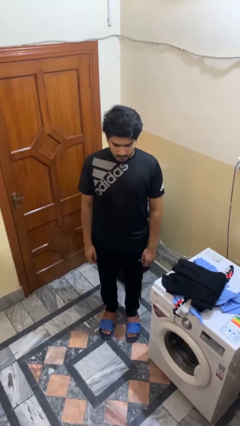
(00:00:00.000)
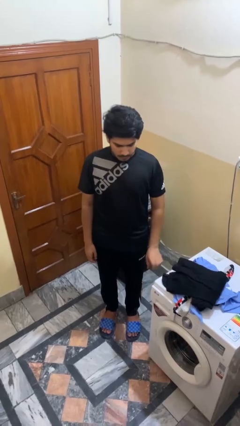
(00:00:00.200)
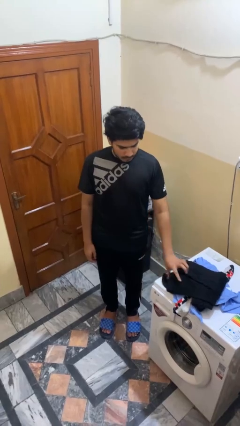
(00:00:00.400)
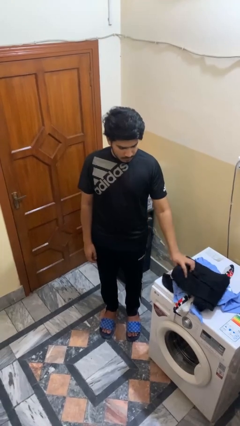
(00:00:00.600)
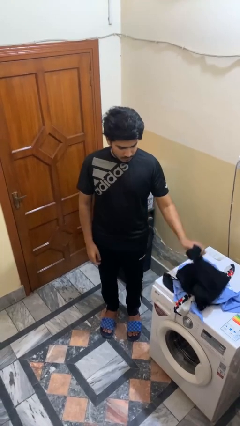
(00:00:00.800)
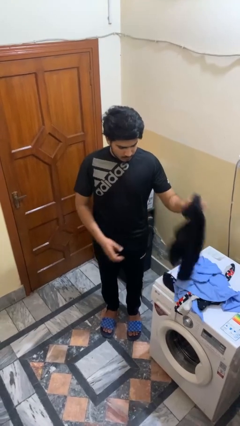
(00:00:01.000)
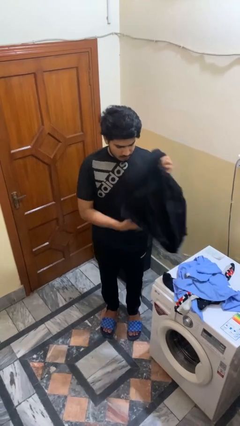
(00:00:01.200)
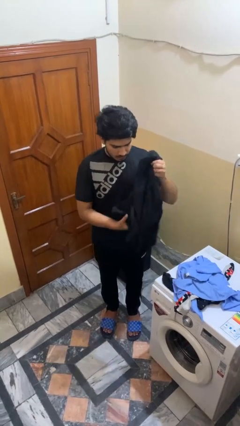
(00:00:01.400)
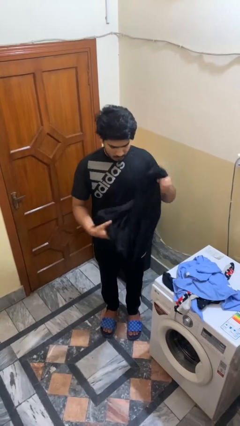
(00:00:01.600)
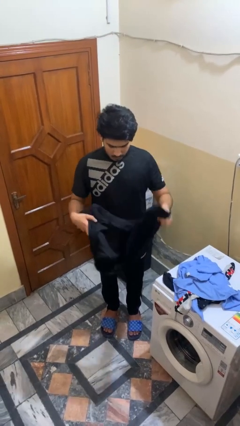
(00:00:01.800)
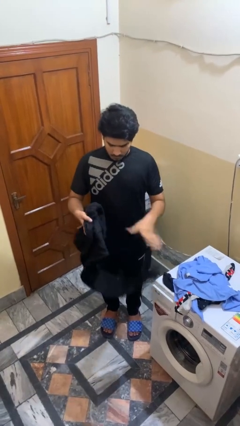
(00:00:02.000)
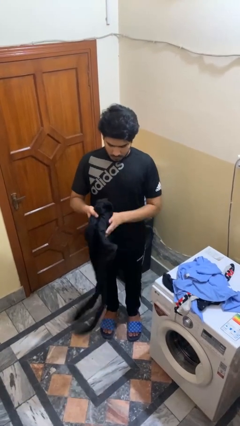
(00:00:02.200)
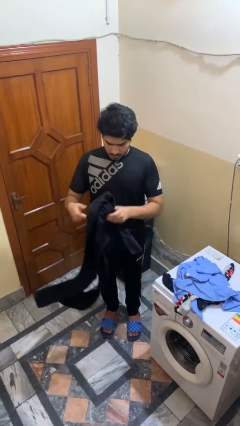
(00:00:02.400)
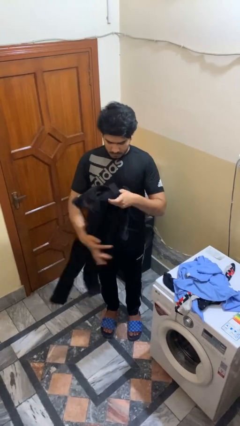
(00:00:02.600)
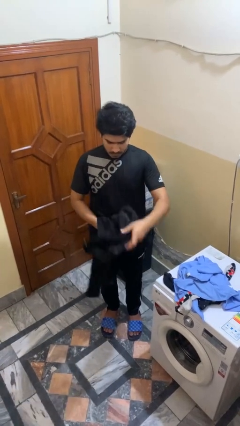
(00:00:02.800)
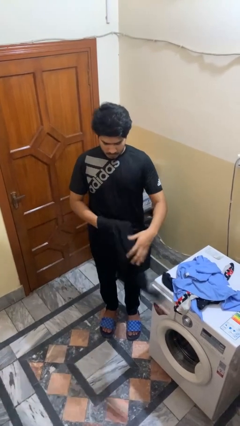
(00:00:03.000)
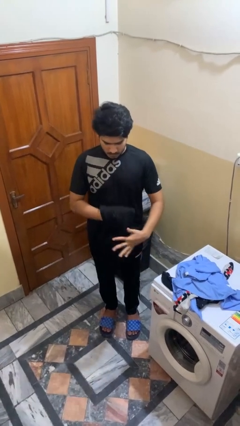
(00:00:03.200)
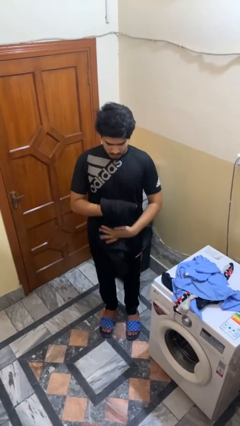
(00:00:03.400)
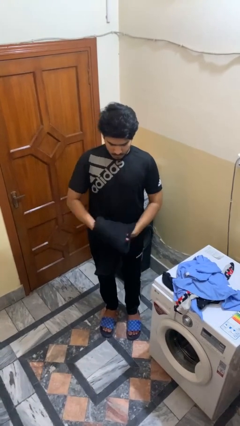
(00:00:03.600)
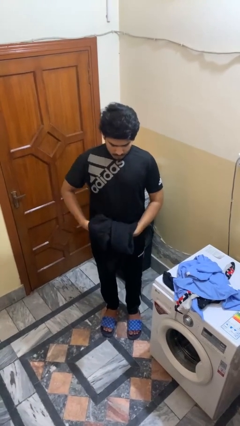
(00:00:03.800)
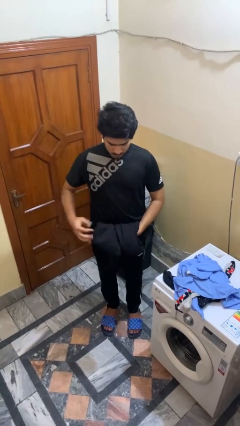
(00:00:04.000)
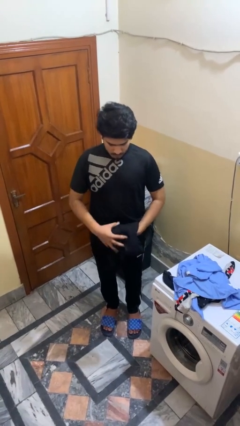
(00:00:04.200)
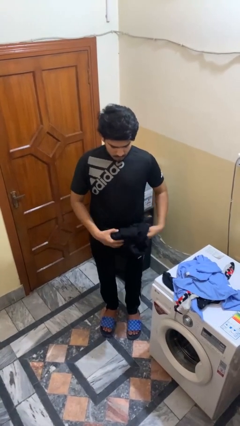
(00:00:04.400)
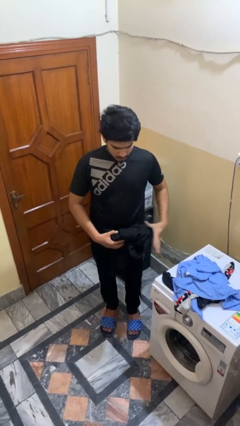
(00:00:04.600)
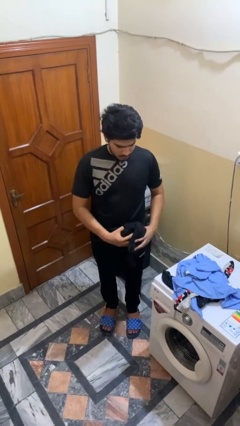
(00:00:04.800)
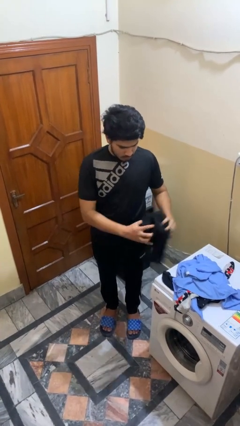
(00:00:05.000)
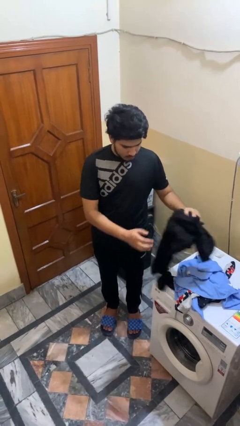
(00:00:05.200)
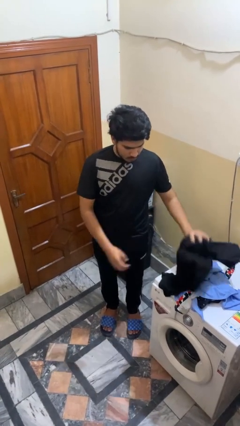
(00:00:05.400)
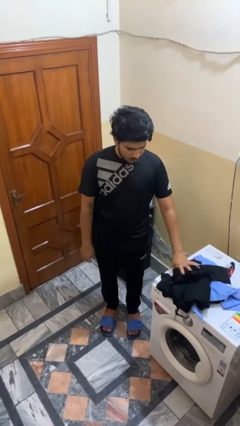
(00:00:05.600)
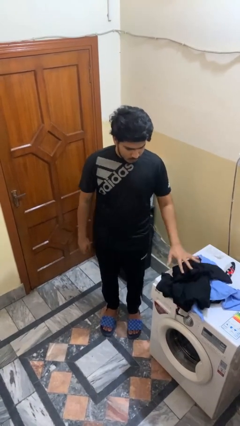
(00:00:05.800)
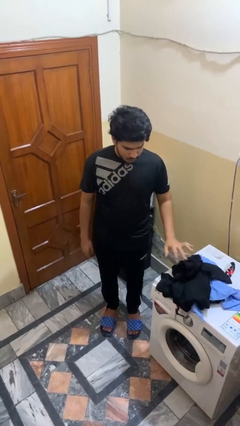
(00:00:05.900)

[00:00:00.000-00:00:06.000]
person folds pants

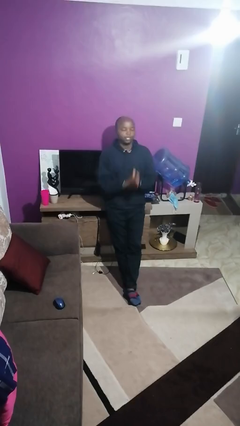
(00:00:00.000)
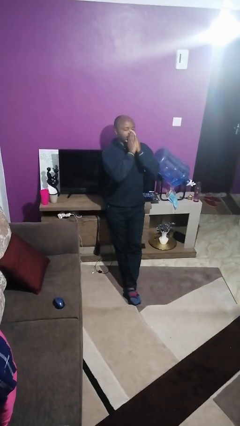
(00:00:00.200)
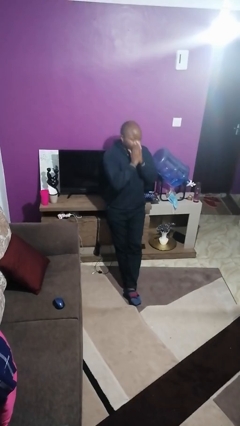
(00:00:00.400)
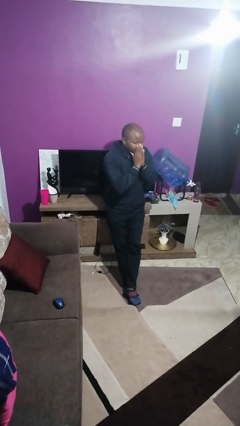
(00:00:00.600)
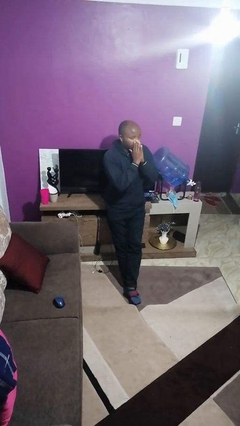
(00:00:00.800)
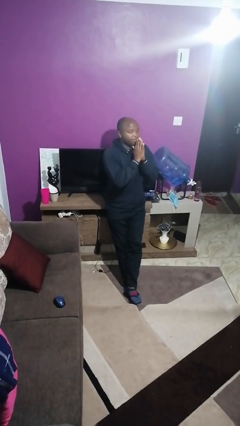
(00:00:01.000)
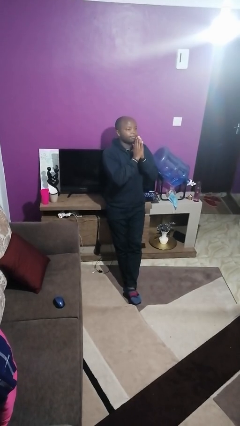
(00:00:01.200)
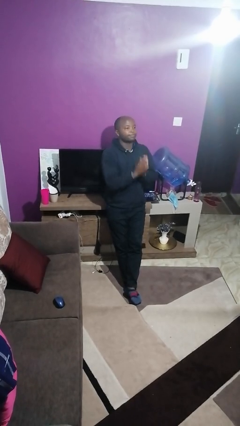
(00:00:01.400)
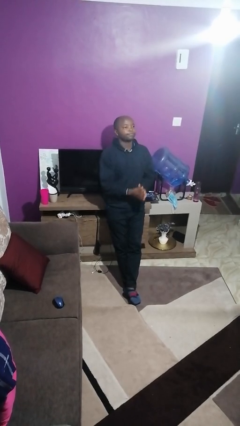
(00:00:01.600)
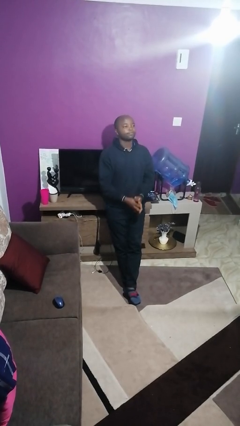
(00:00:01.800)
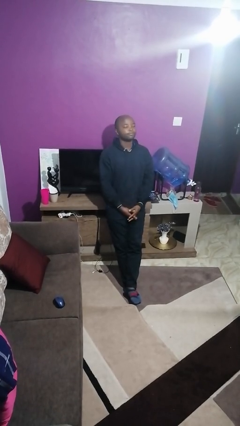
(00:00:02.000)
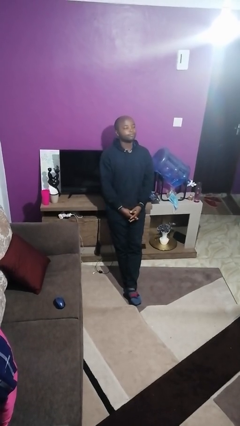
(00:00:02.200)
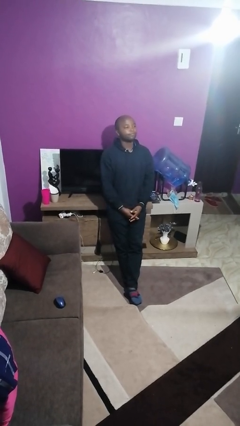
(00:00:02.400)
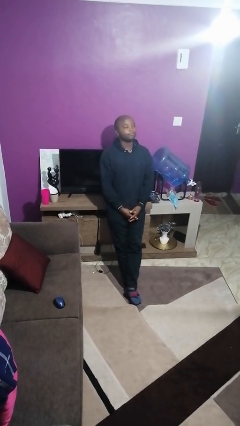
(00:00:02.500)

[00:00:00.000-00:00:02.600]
person sneezes into hand

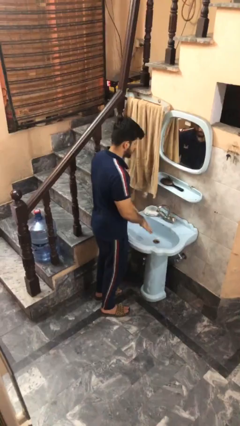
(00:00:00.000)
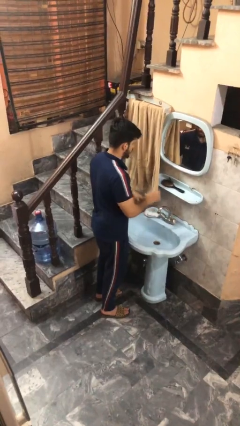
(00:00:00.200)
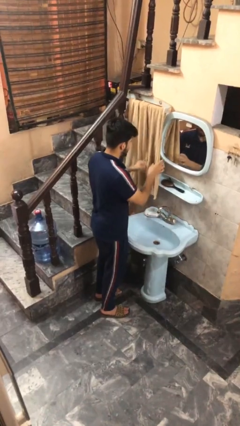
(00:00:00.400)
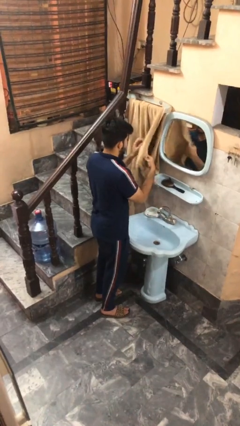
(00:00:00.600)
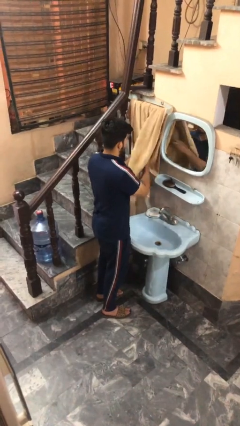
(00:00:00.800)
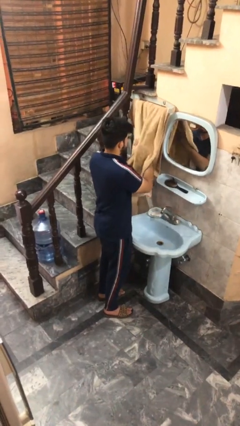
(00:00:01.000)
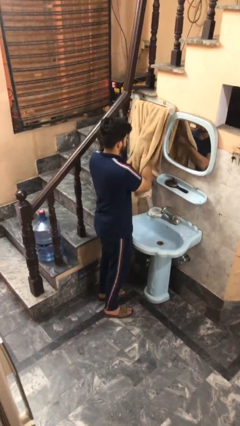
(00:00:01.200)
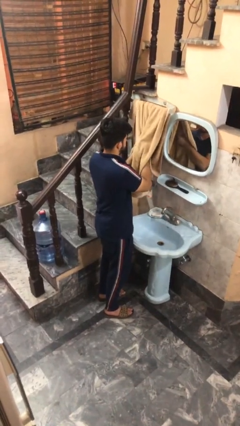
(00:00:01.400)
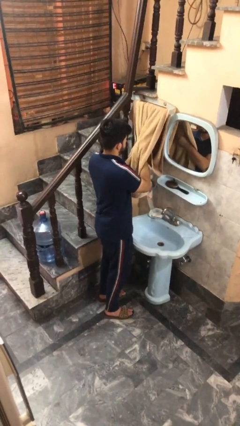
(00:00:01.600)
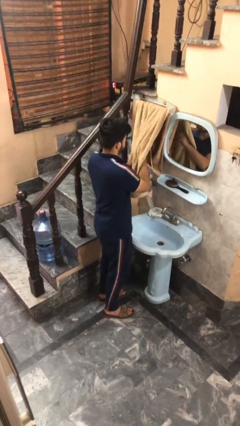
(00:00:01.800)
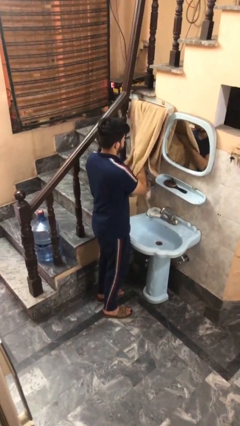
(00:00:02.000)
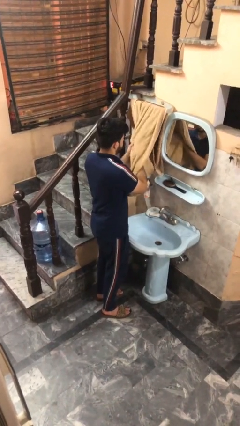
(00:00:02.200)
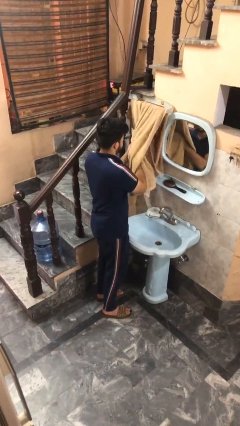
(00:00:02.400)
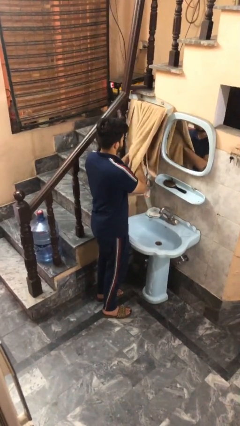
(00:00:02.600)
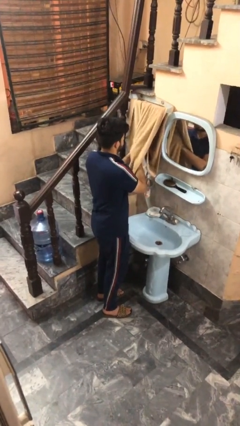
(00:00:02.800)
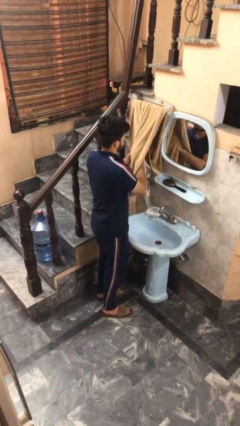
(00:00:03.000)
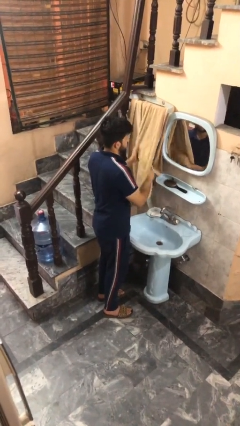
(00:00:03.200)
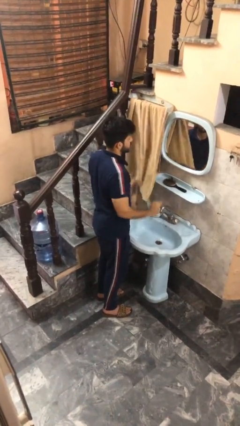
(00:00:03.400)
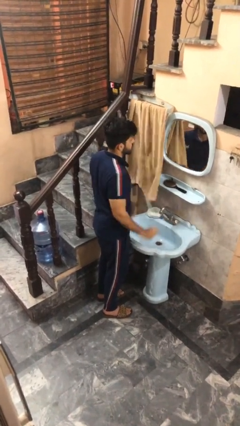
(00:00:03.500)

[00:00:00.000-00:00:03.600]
person dries hands with towel

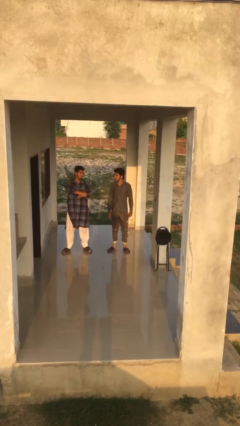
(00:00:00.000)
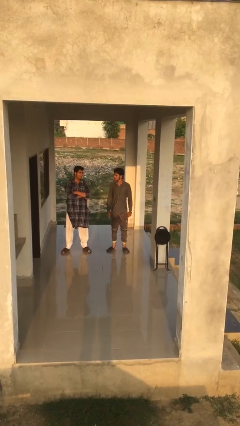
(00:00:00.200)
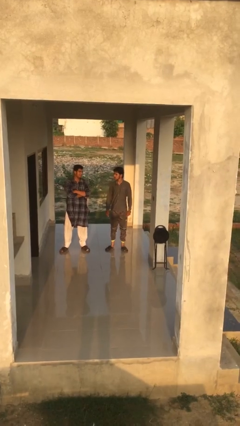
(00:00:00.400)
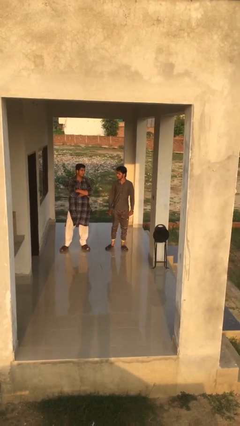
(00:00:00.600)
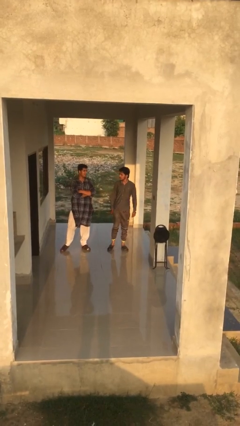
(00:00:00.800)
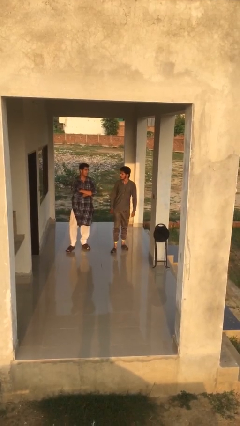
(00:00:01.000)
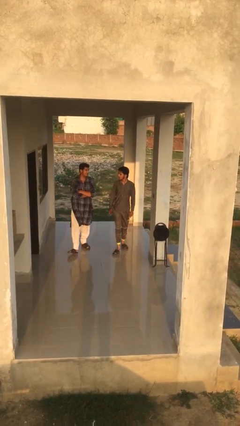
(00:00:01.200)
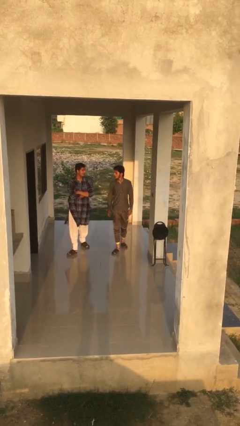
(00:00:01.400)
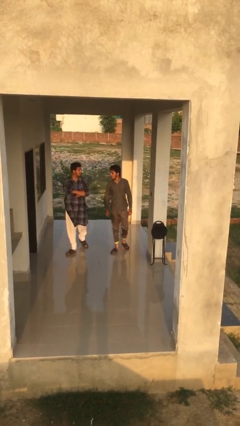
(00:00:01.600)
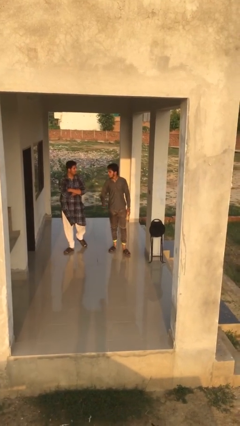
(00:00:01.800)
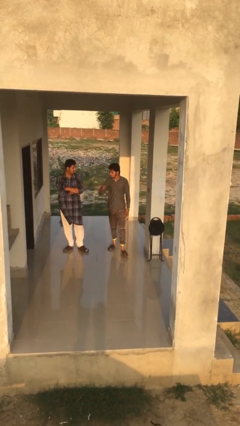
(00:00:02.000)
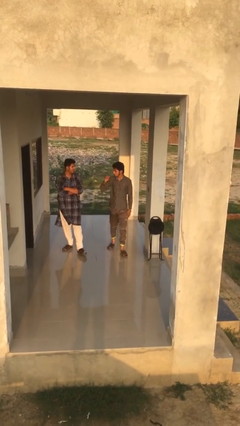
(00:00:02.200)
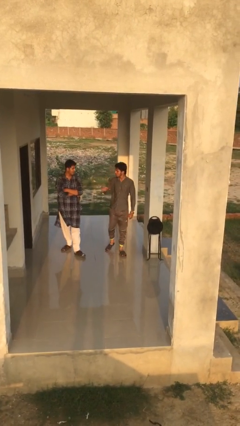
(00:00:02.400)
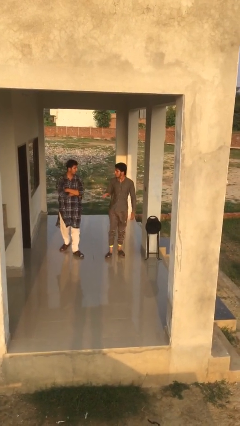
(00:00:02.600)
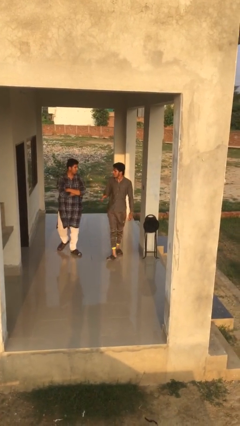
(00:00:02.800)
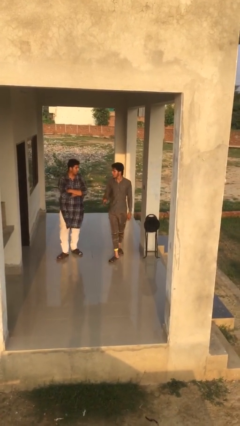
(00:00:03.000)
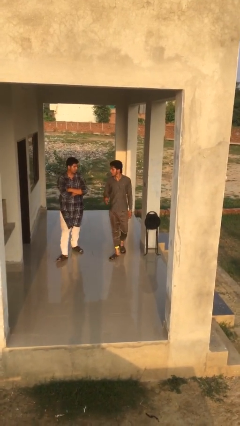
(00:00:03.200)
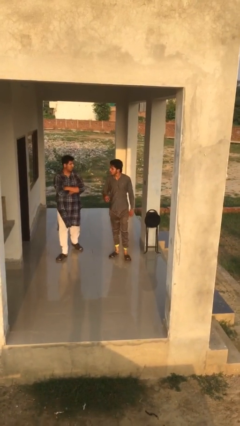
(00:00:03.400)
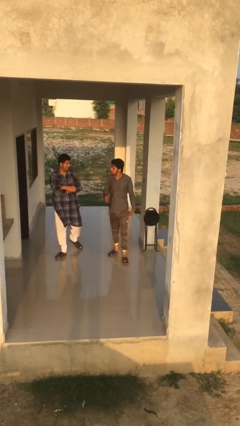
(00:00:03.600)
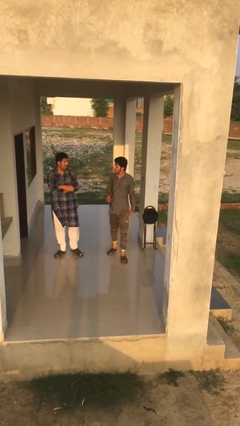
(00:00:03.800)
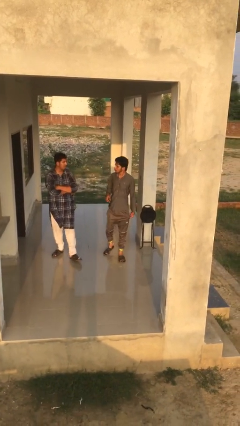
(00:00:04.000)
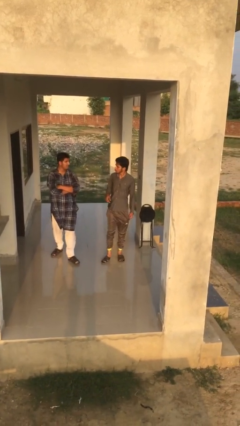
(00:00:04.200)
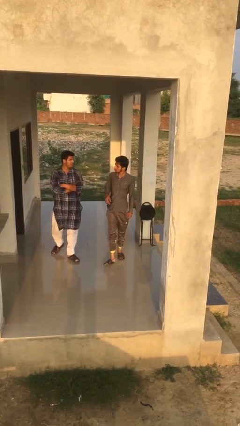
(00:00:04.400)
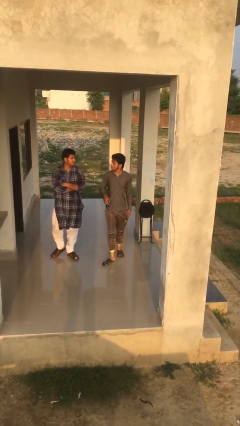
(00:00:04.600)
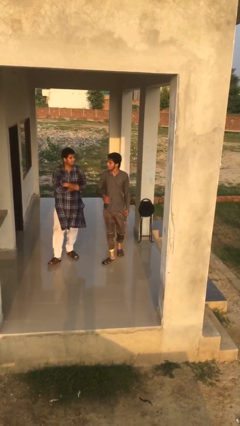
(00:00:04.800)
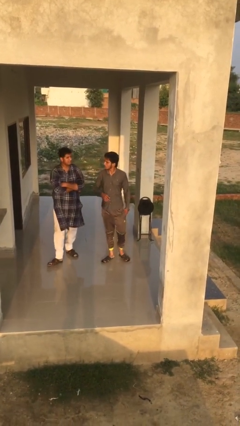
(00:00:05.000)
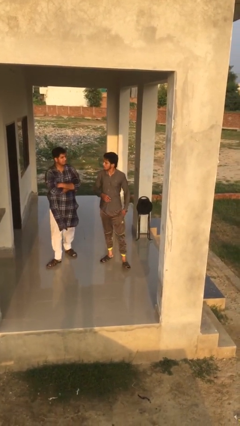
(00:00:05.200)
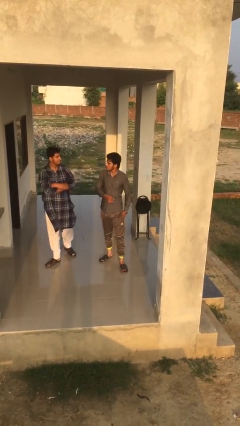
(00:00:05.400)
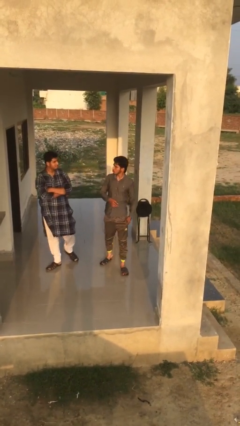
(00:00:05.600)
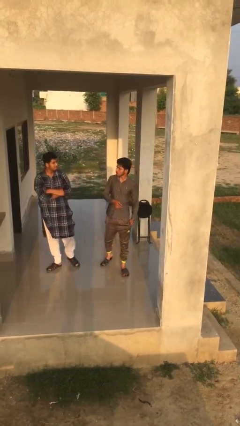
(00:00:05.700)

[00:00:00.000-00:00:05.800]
person talks to person
